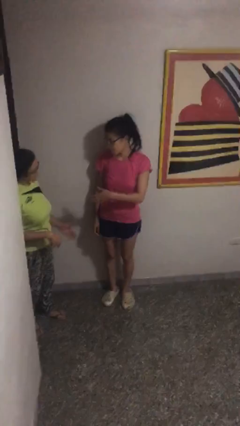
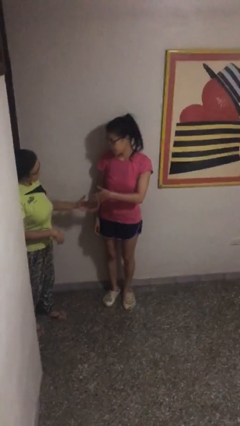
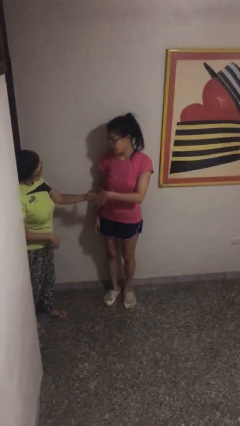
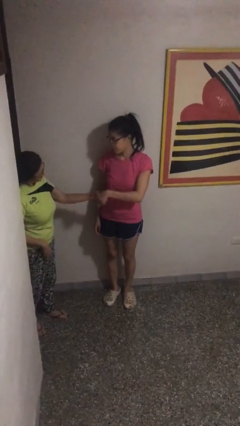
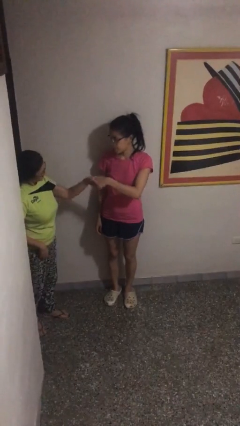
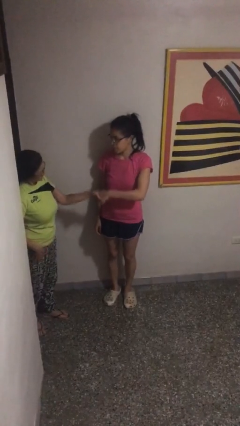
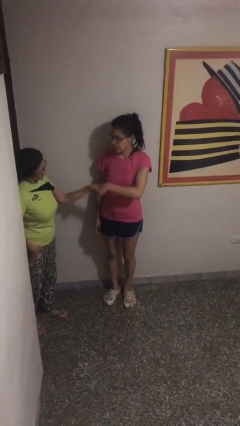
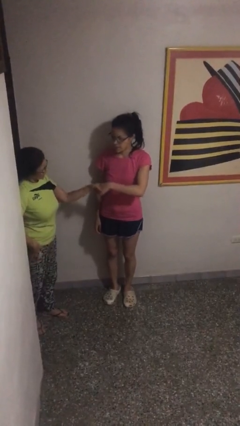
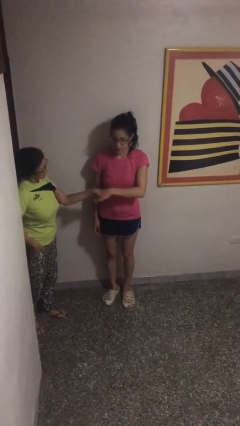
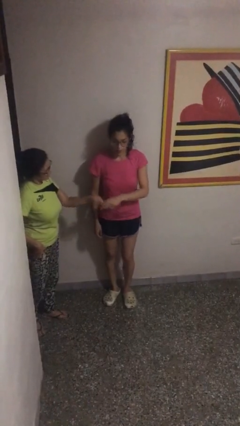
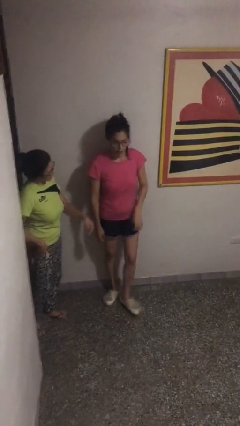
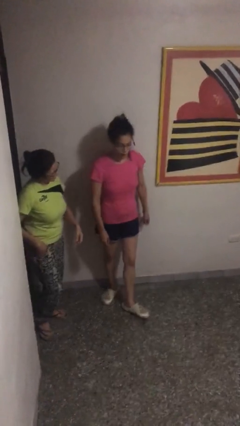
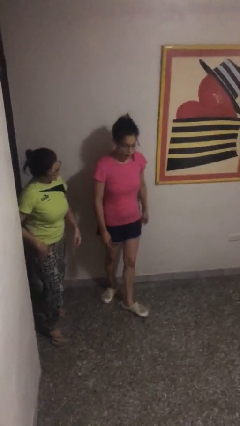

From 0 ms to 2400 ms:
person shakes hand

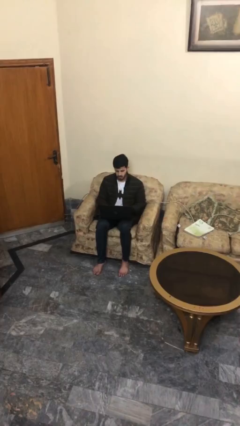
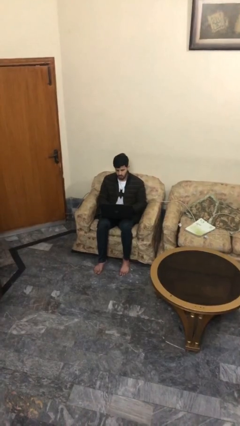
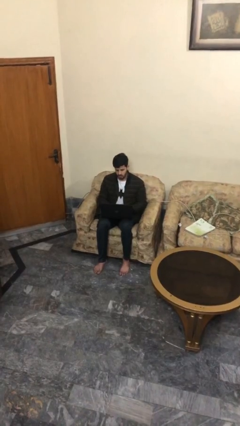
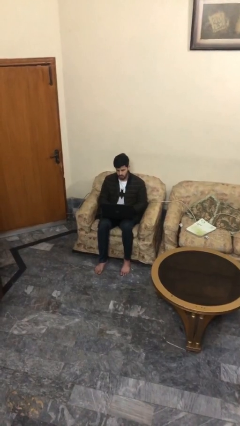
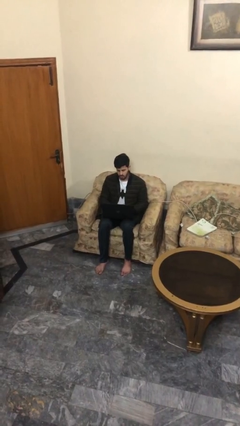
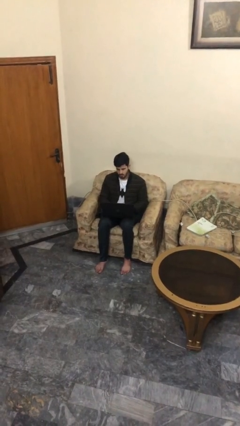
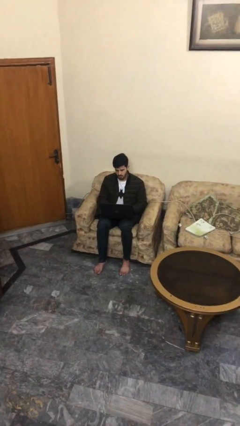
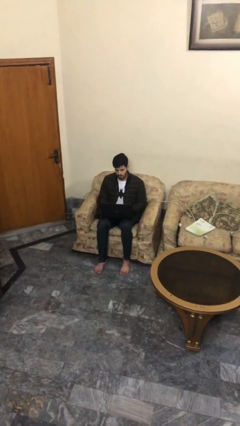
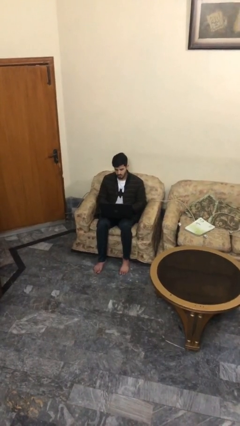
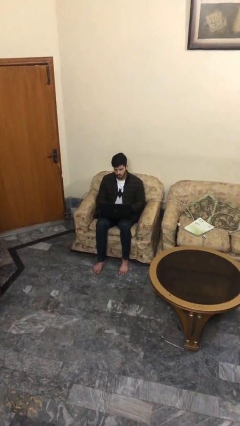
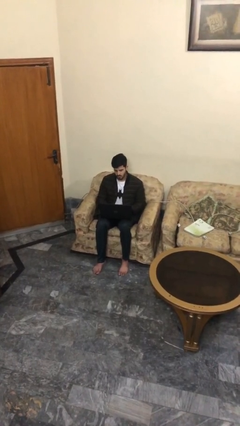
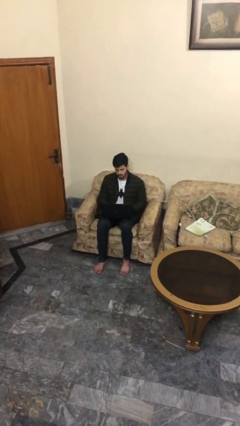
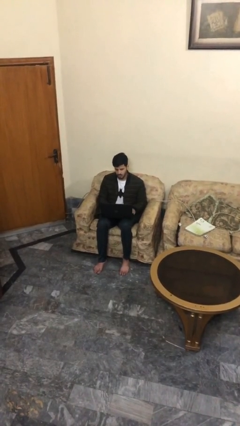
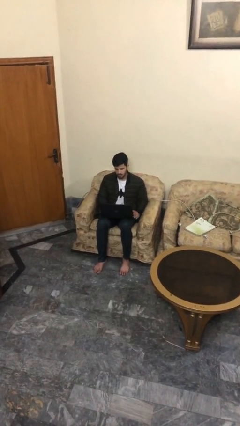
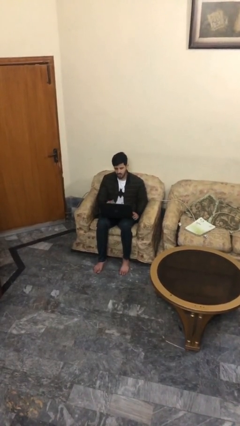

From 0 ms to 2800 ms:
person interacts with laptop

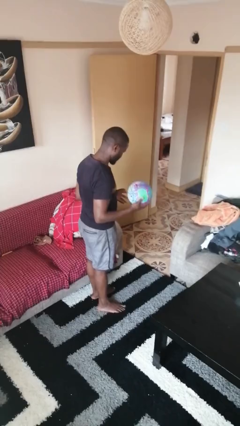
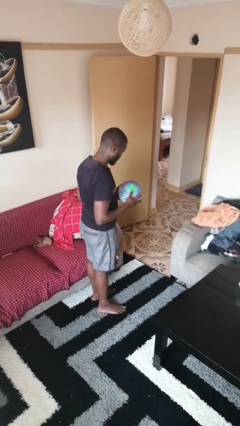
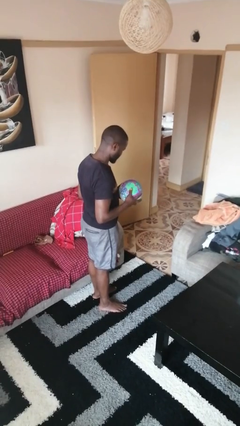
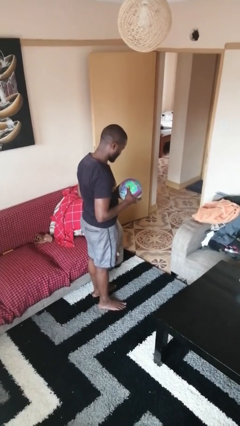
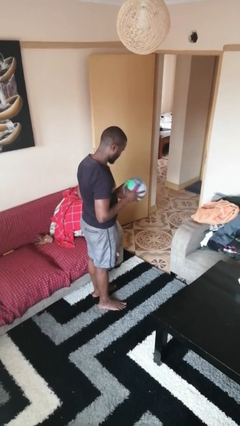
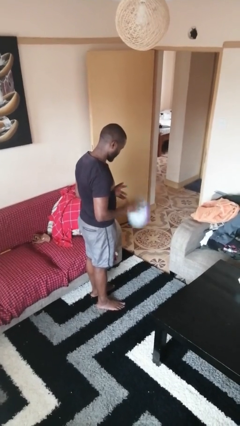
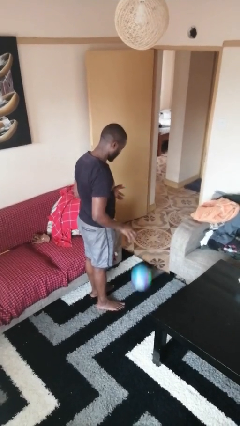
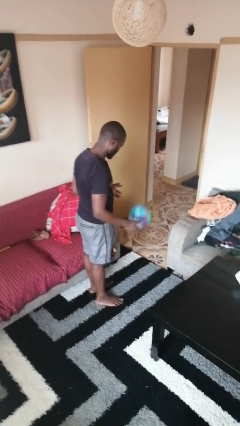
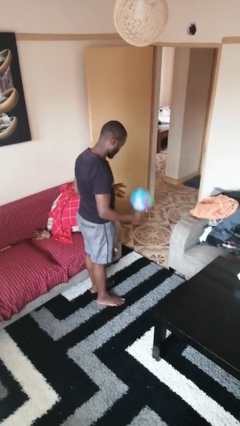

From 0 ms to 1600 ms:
person bounces ball on floor

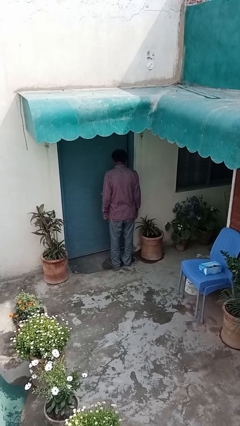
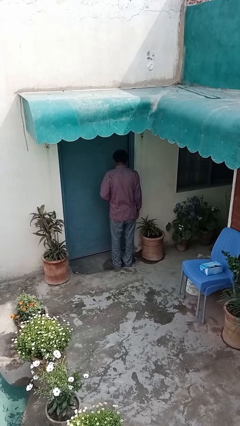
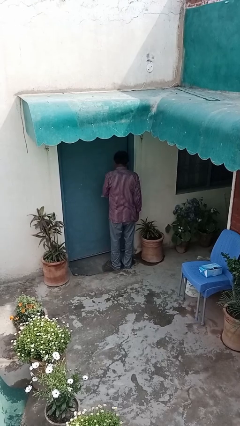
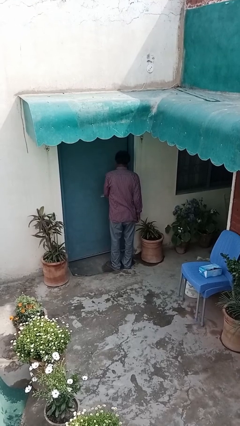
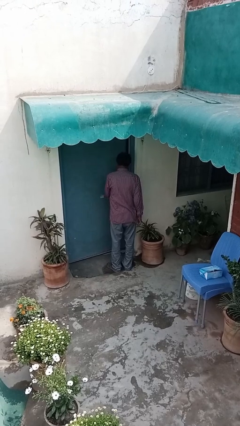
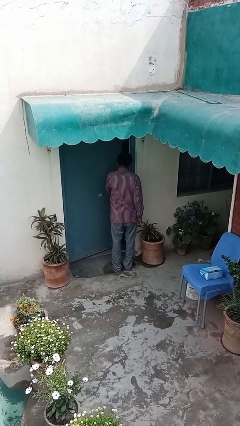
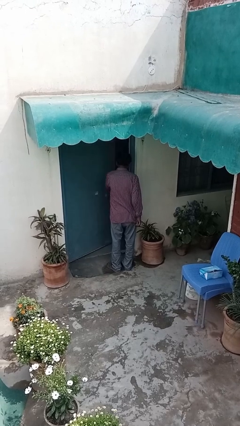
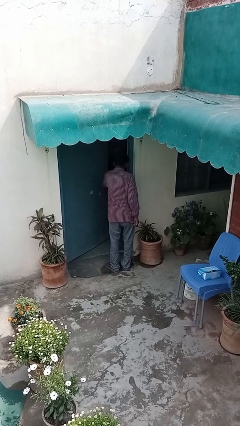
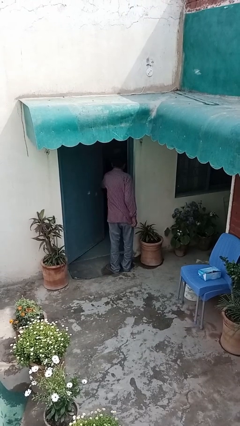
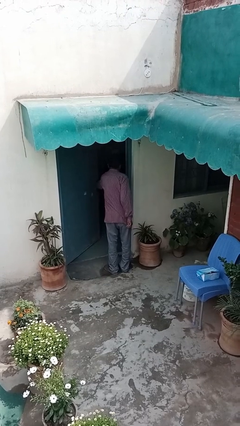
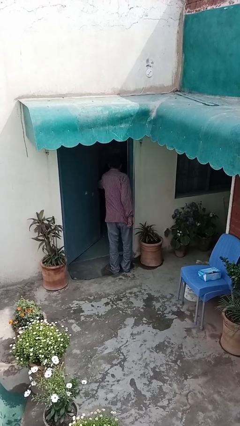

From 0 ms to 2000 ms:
person opens facility door

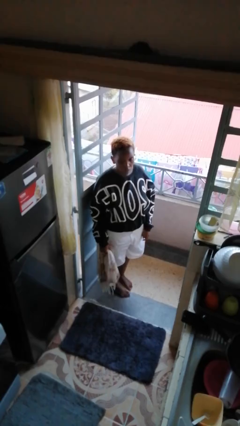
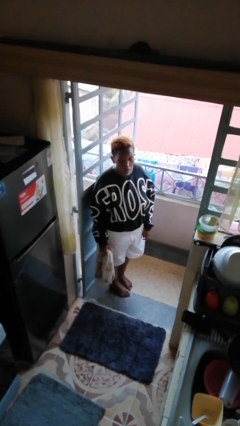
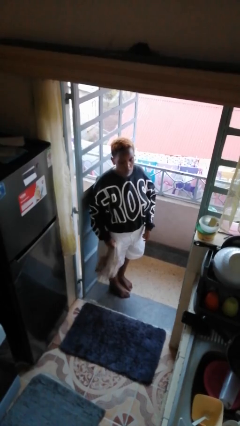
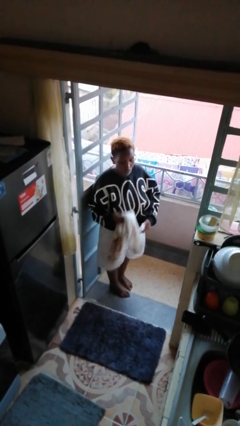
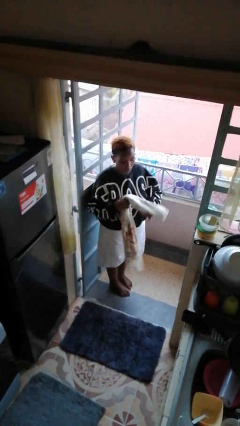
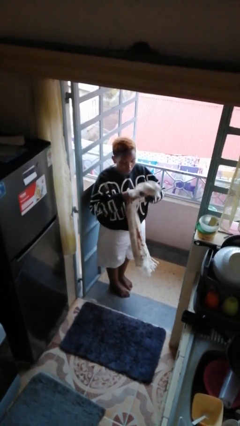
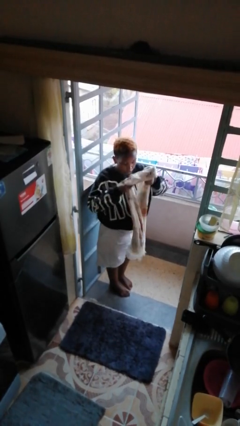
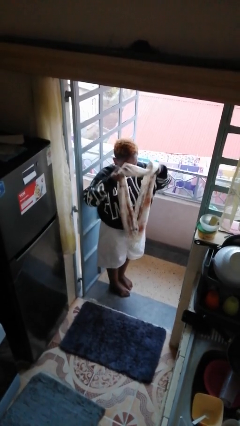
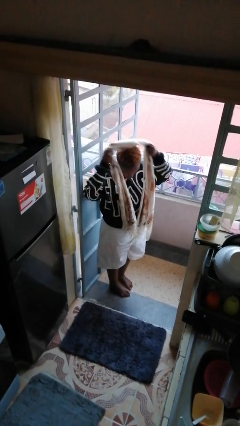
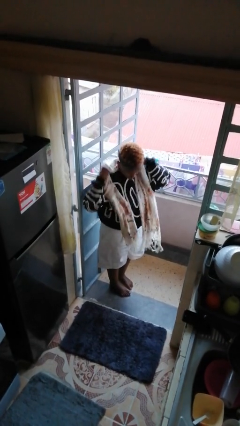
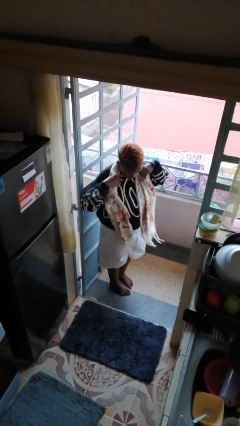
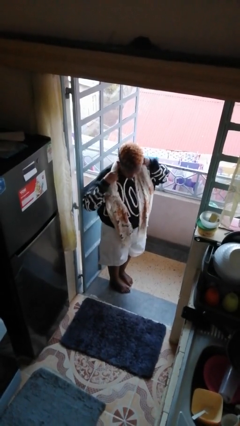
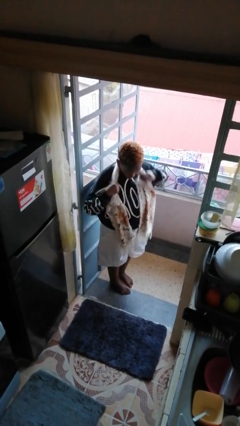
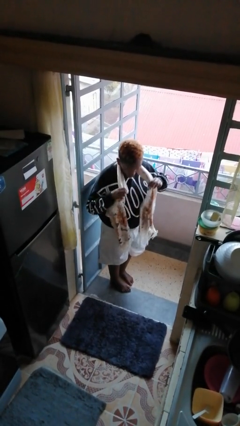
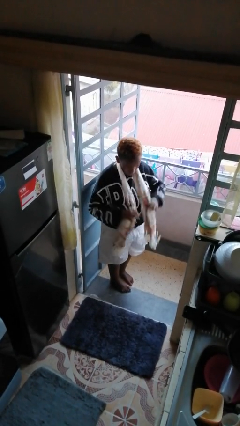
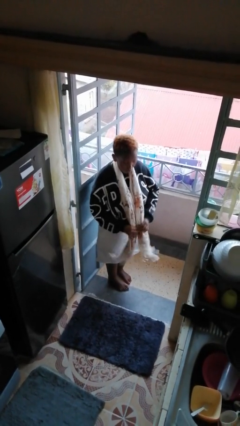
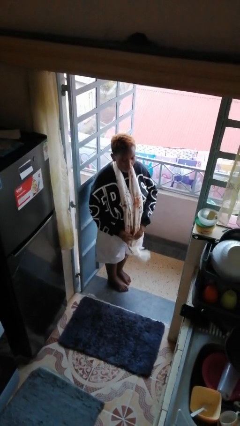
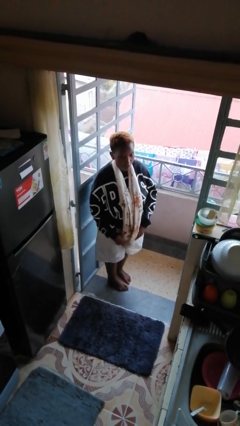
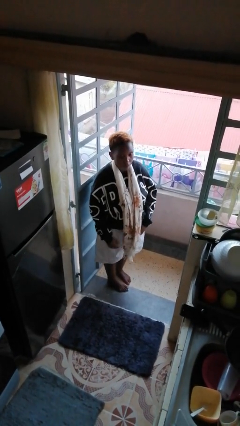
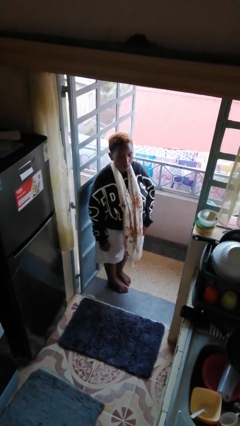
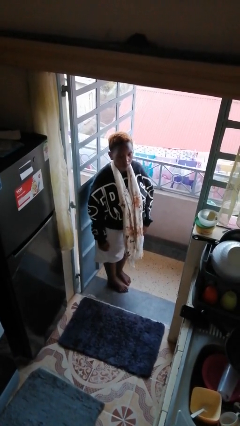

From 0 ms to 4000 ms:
person puts on scarf

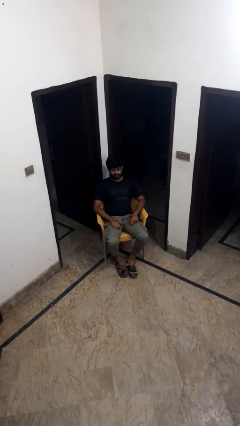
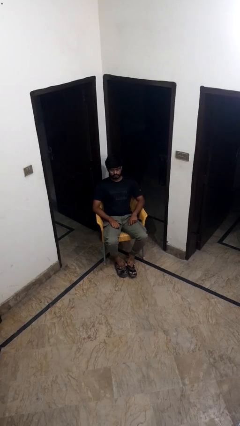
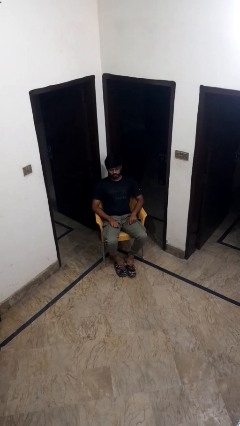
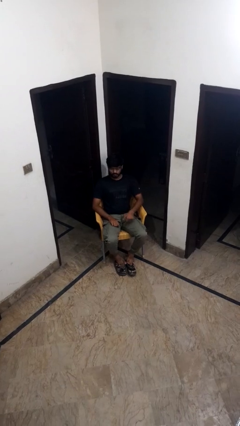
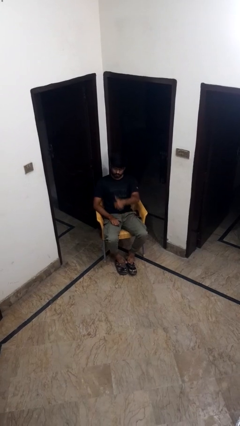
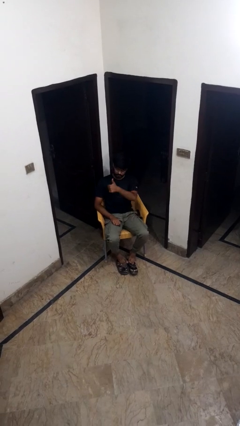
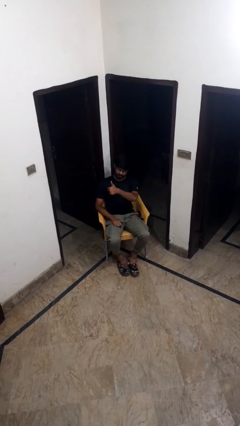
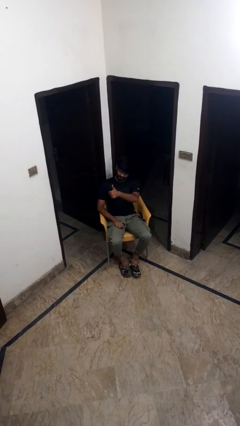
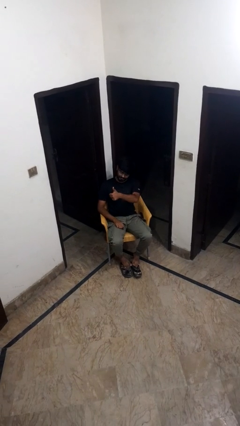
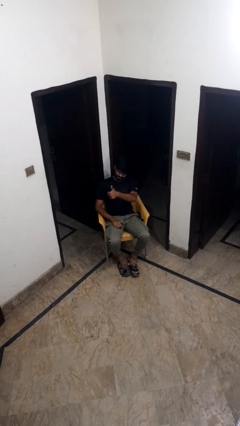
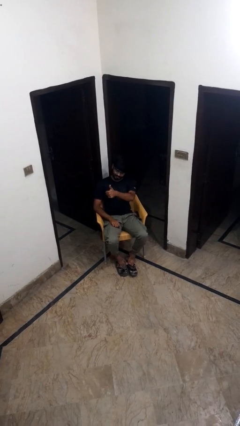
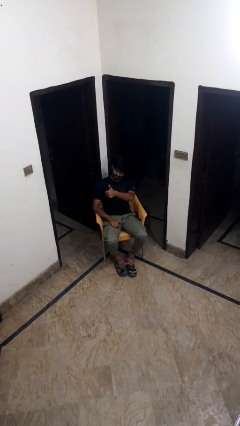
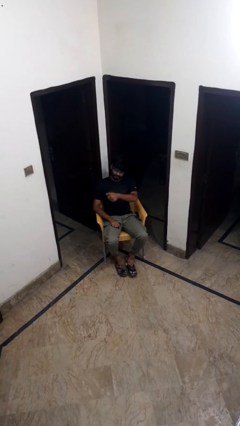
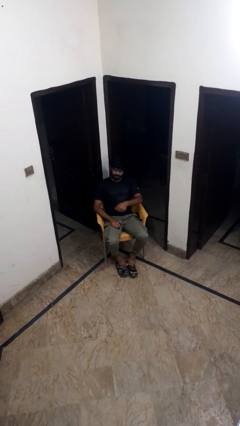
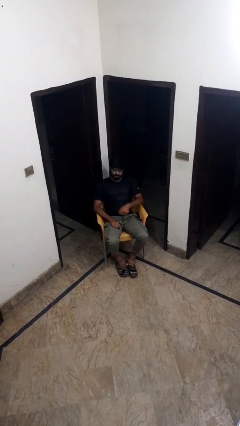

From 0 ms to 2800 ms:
person gestures thumbs up

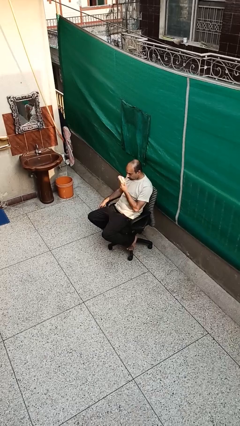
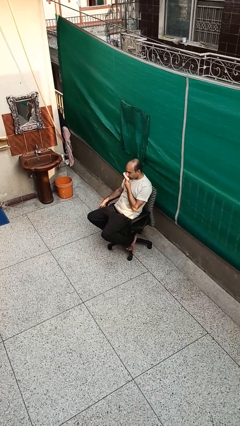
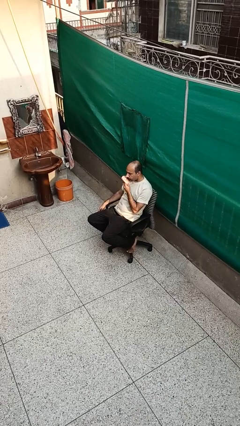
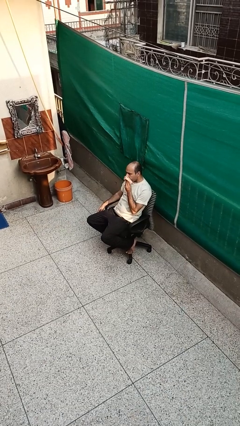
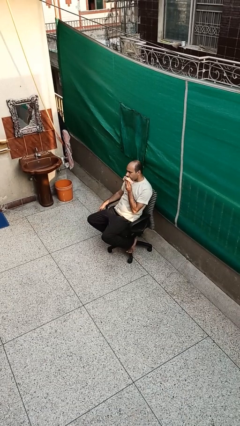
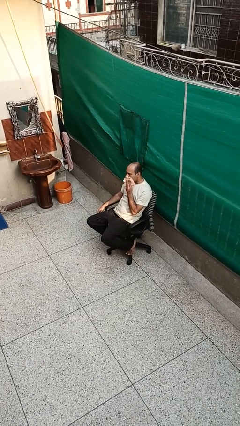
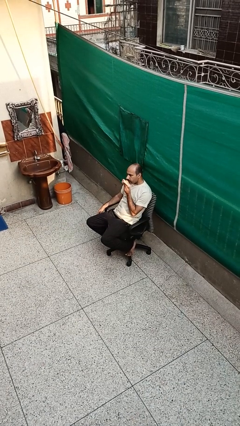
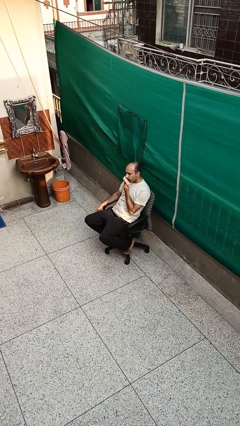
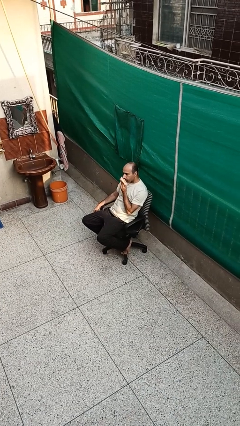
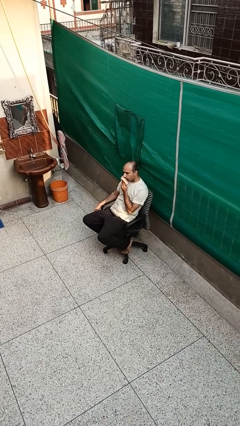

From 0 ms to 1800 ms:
person wipes mouth with napkin
